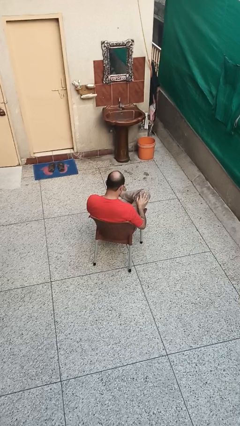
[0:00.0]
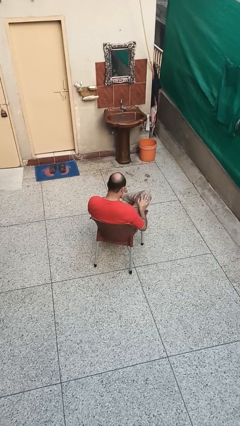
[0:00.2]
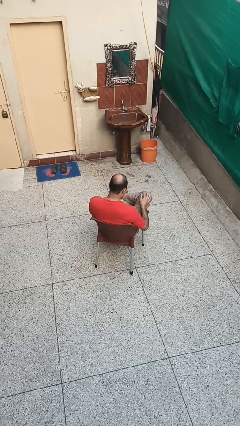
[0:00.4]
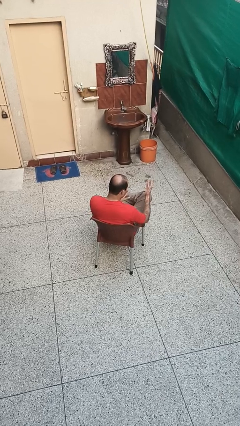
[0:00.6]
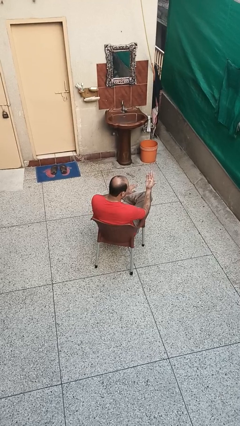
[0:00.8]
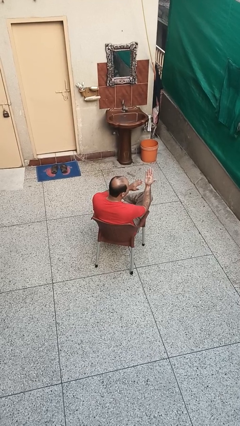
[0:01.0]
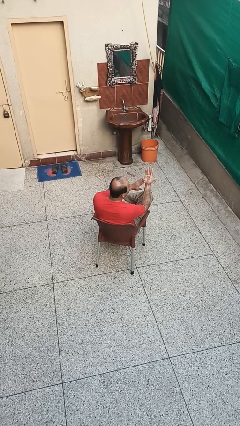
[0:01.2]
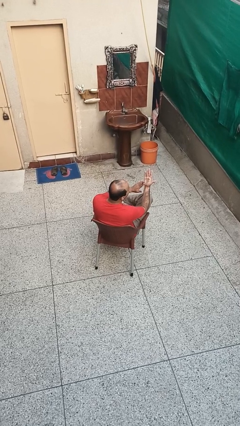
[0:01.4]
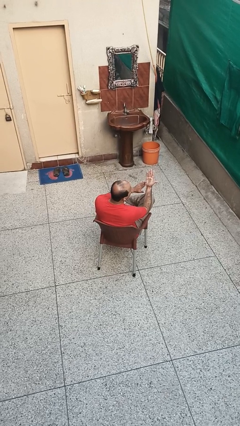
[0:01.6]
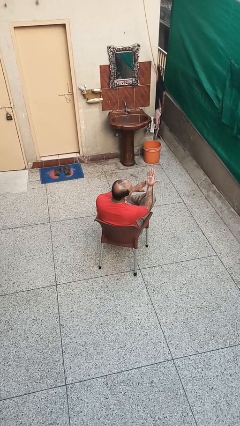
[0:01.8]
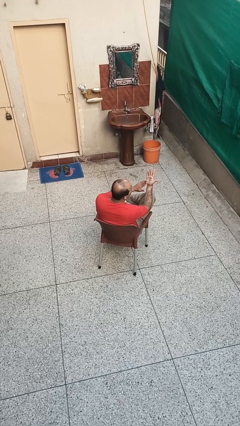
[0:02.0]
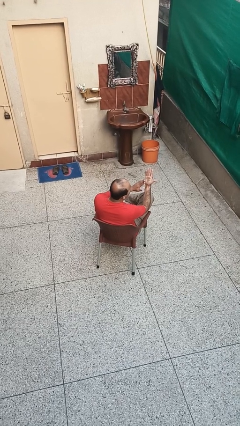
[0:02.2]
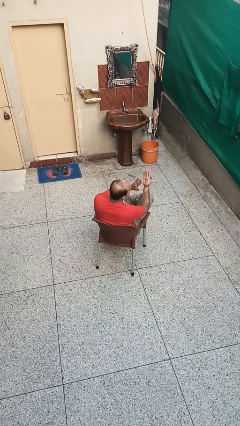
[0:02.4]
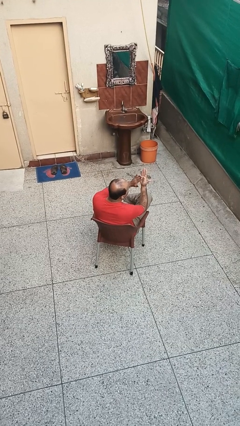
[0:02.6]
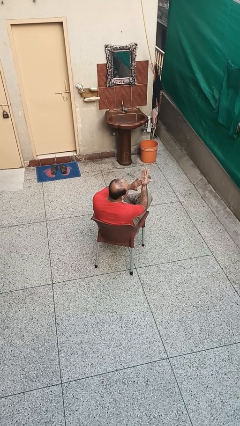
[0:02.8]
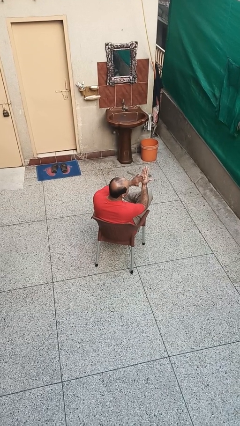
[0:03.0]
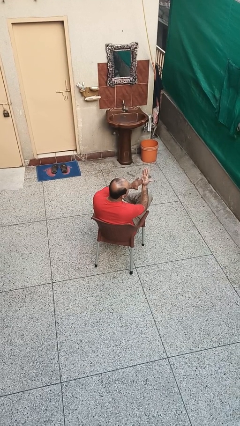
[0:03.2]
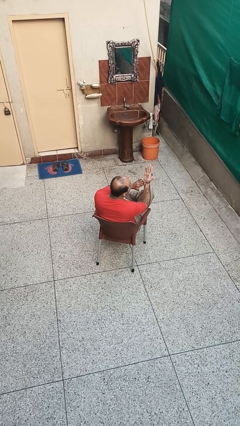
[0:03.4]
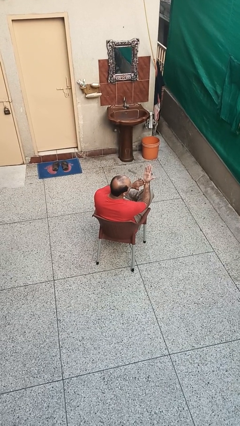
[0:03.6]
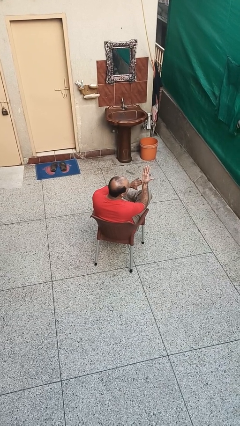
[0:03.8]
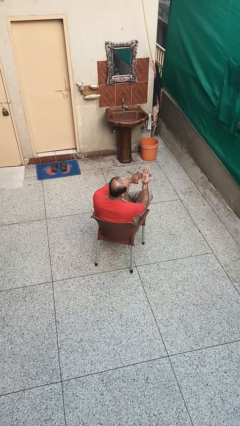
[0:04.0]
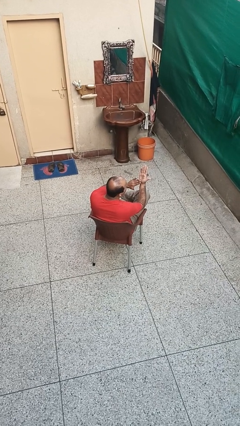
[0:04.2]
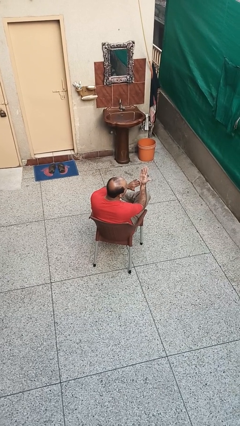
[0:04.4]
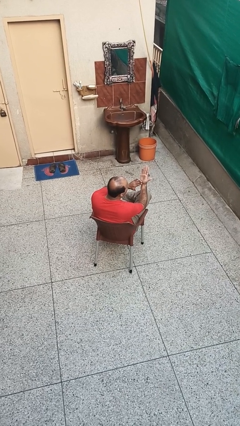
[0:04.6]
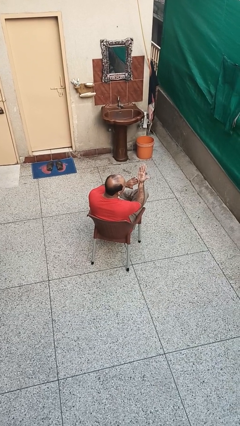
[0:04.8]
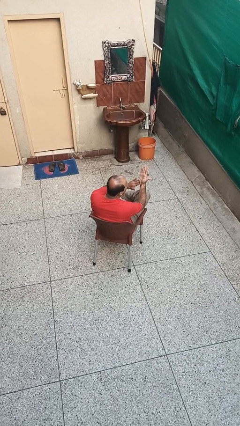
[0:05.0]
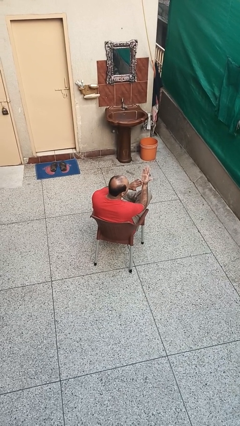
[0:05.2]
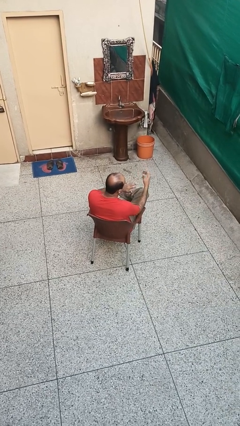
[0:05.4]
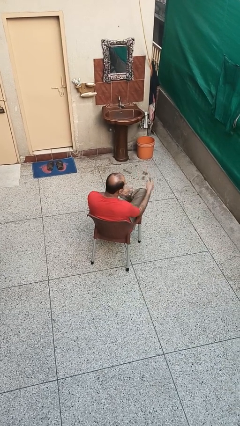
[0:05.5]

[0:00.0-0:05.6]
person looks at hands in lap

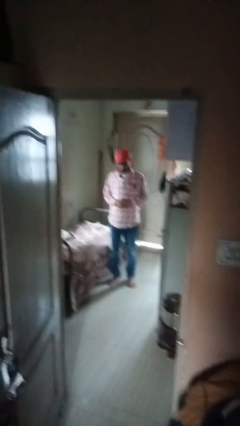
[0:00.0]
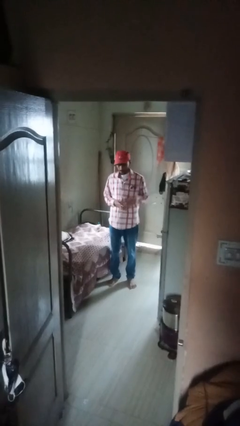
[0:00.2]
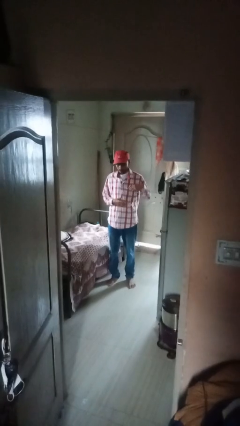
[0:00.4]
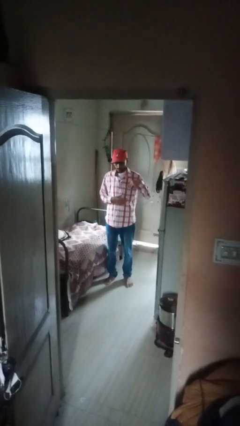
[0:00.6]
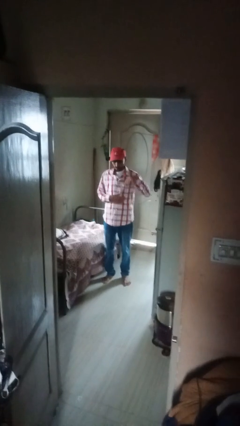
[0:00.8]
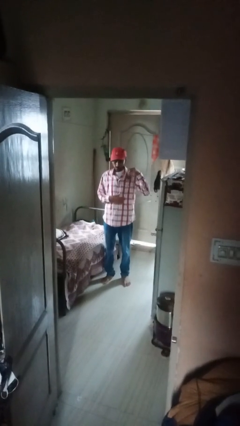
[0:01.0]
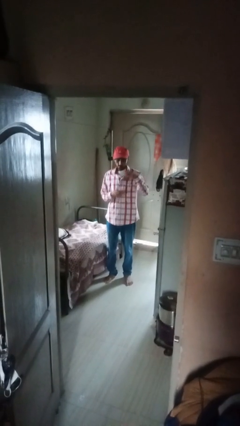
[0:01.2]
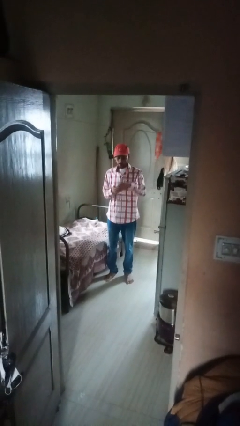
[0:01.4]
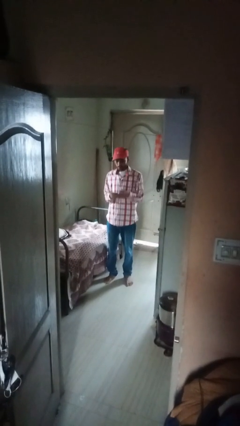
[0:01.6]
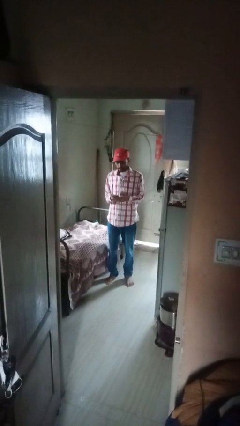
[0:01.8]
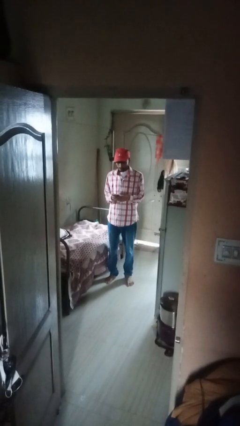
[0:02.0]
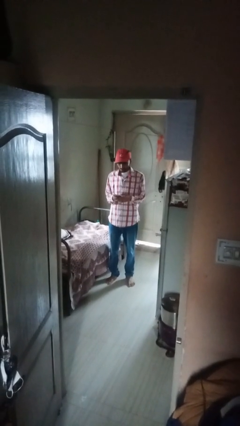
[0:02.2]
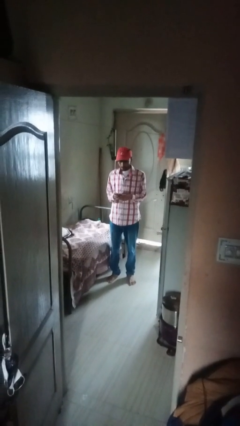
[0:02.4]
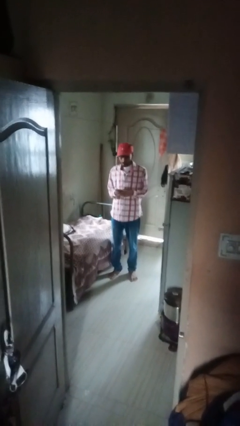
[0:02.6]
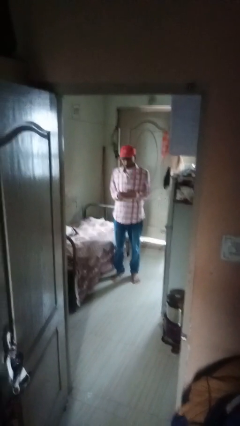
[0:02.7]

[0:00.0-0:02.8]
person takes phone from pocket

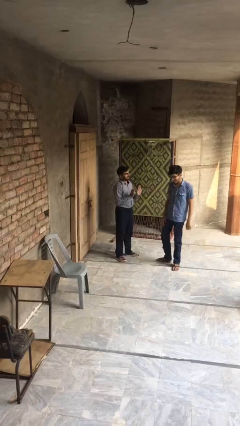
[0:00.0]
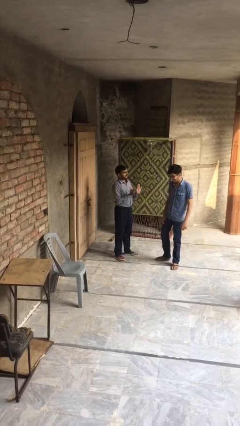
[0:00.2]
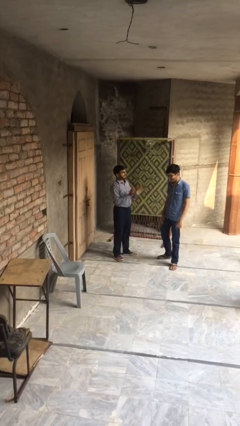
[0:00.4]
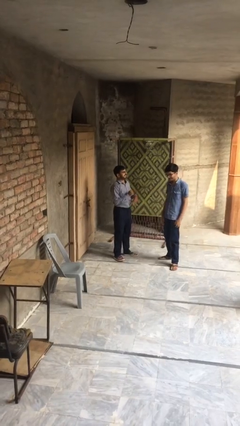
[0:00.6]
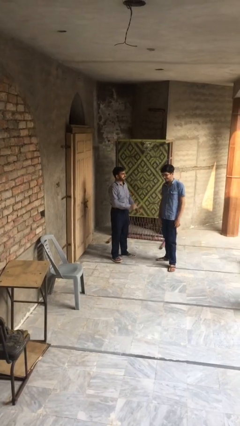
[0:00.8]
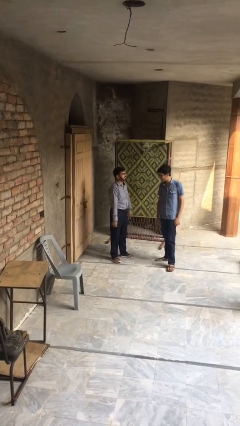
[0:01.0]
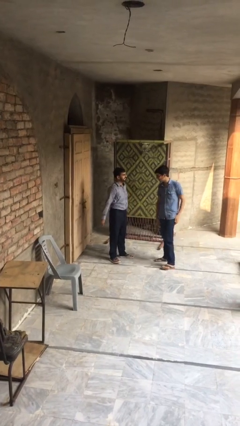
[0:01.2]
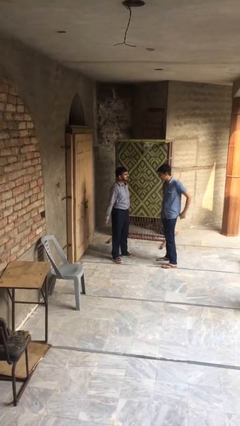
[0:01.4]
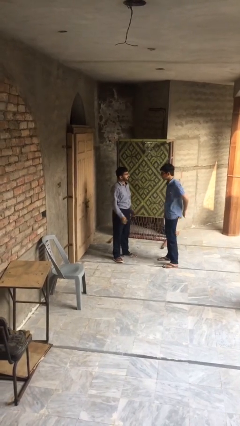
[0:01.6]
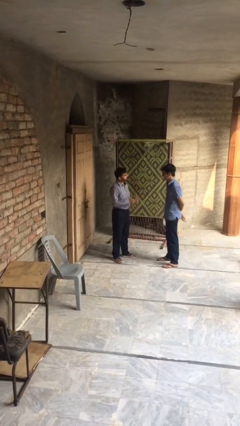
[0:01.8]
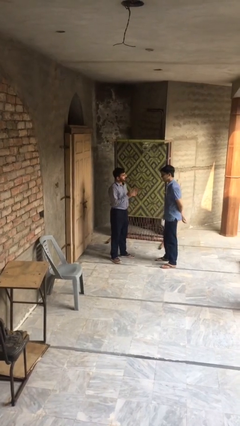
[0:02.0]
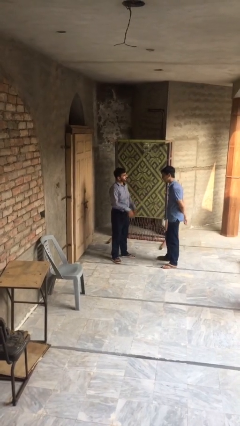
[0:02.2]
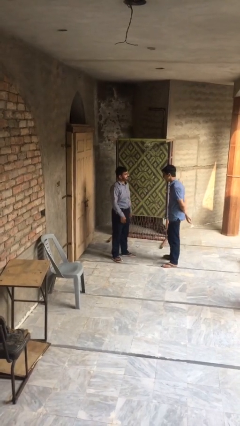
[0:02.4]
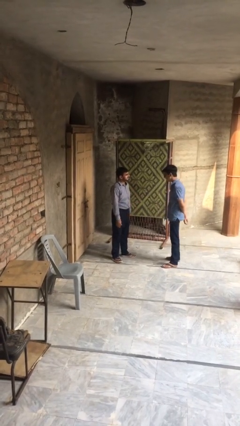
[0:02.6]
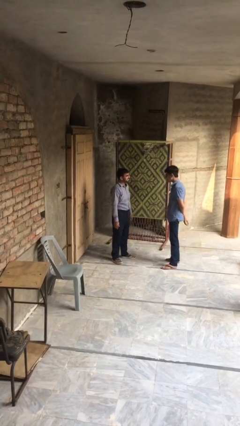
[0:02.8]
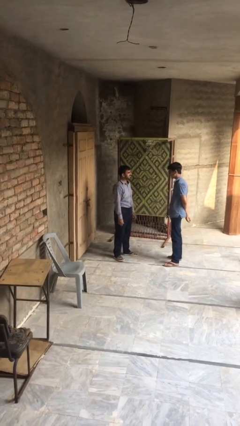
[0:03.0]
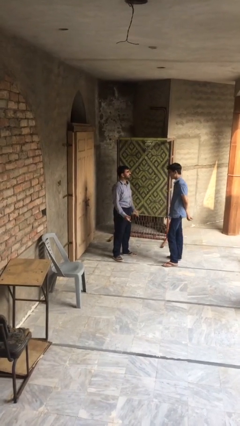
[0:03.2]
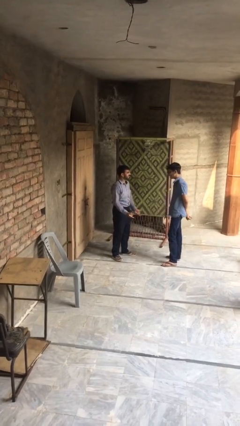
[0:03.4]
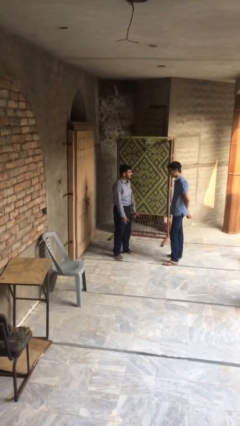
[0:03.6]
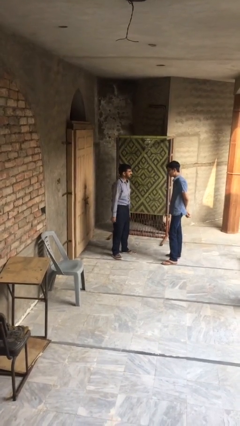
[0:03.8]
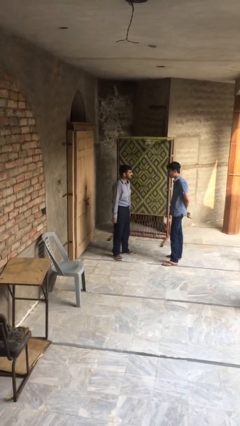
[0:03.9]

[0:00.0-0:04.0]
person talks to person

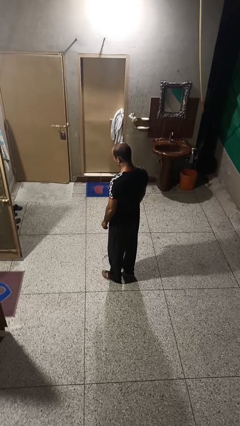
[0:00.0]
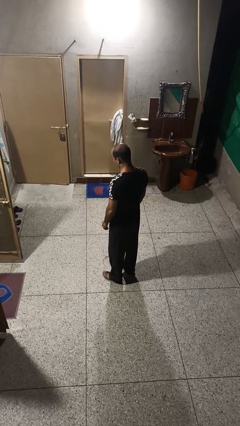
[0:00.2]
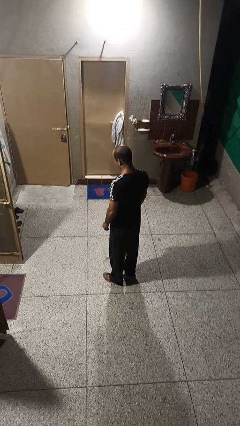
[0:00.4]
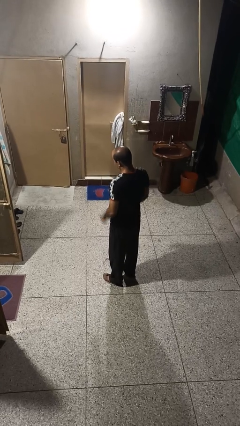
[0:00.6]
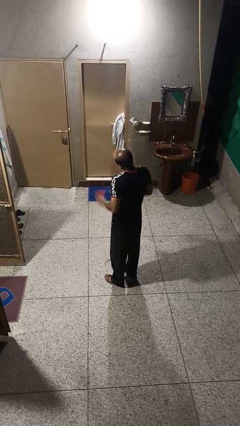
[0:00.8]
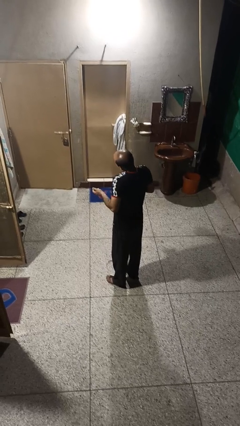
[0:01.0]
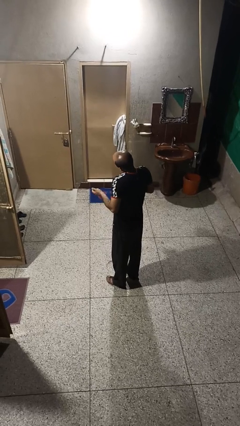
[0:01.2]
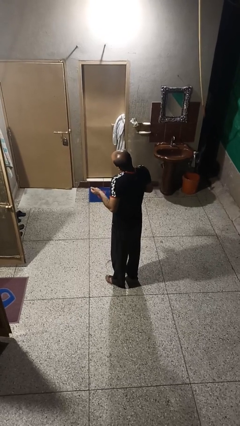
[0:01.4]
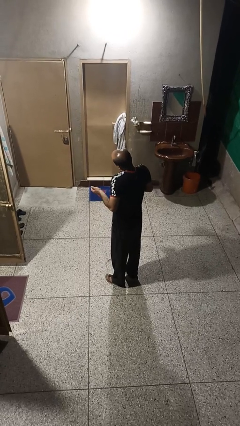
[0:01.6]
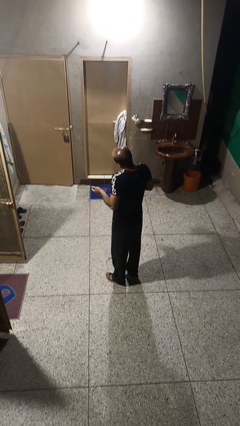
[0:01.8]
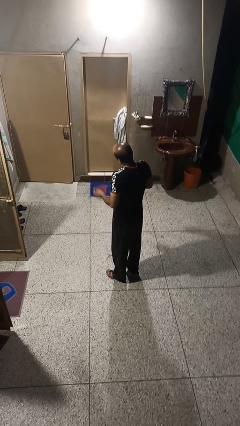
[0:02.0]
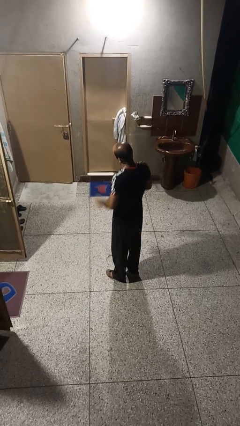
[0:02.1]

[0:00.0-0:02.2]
person shrugs

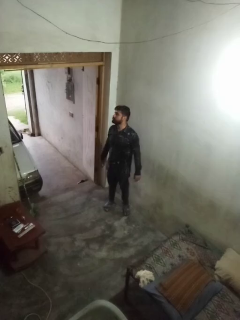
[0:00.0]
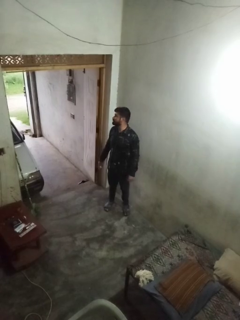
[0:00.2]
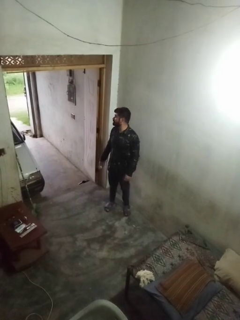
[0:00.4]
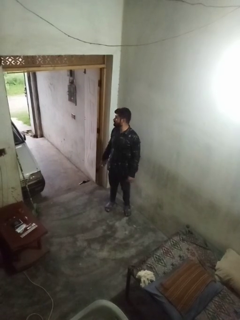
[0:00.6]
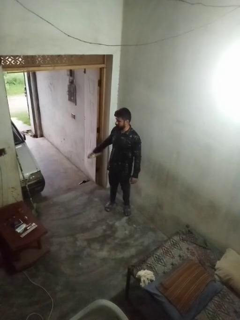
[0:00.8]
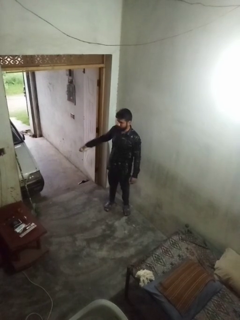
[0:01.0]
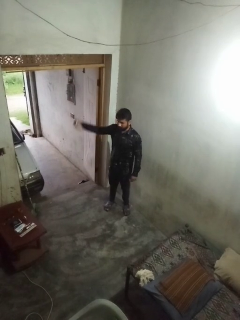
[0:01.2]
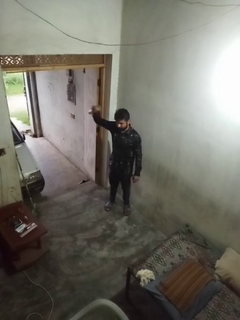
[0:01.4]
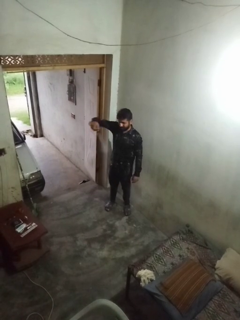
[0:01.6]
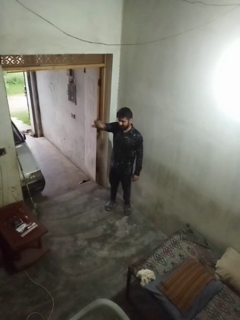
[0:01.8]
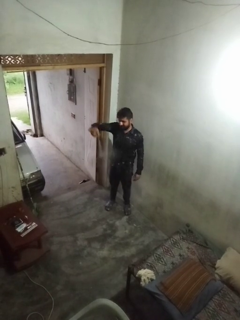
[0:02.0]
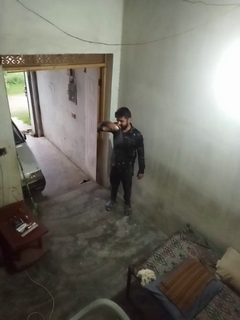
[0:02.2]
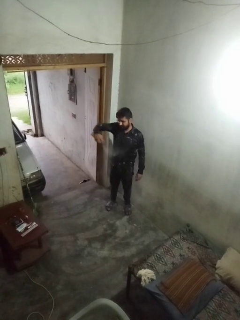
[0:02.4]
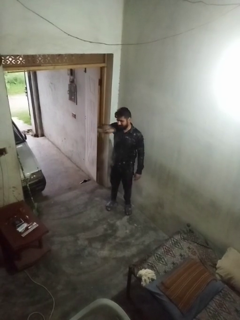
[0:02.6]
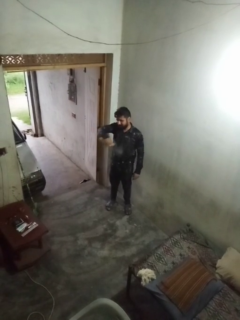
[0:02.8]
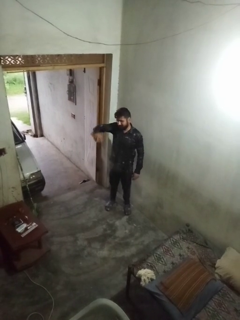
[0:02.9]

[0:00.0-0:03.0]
person applies deodorant

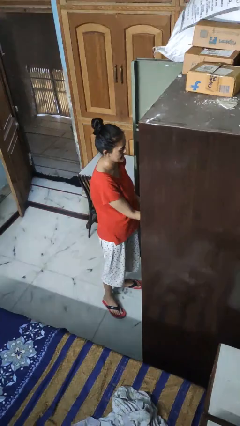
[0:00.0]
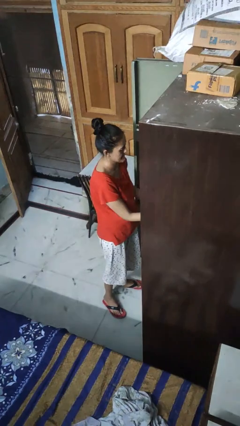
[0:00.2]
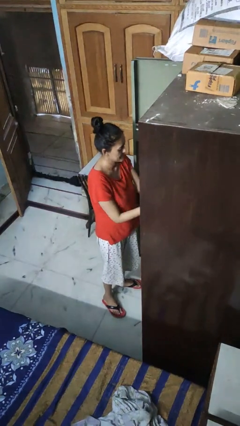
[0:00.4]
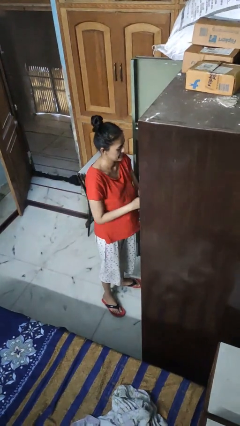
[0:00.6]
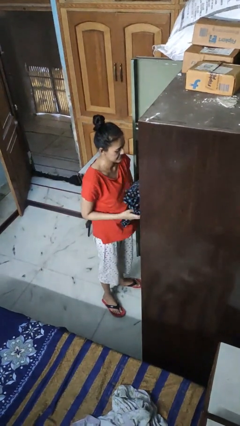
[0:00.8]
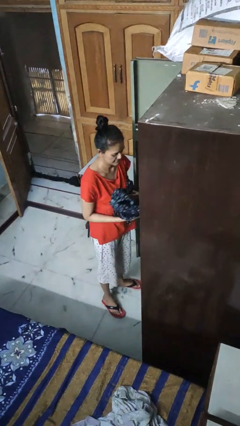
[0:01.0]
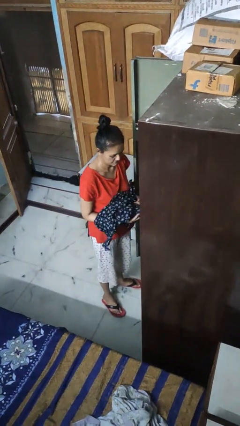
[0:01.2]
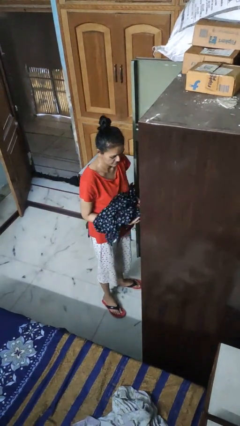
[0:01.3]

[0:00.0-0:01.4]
person takes clothes from dresser
